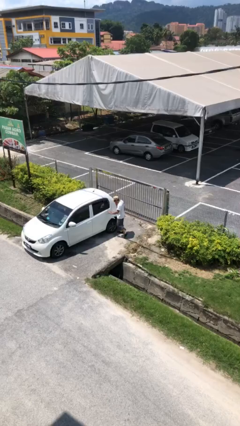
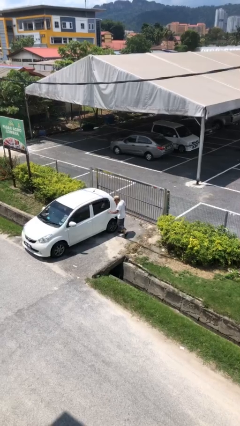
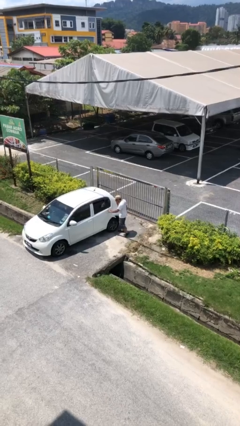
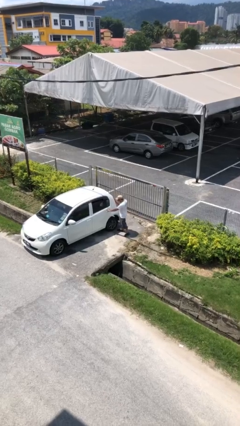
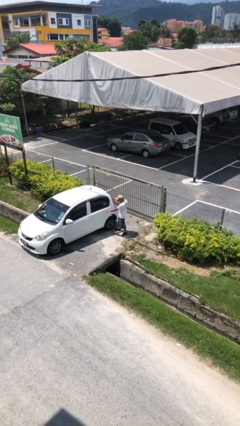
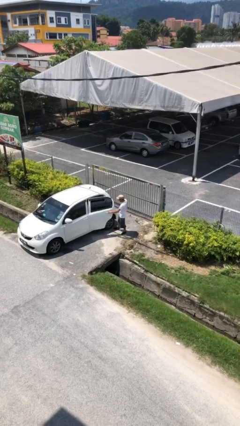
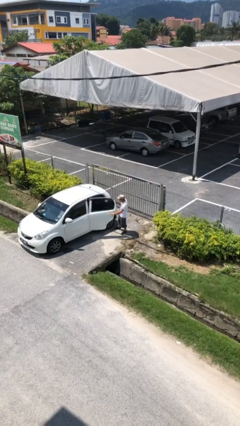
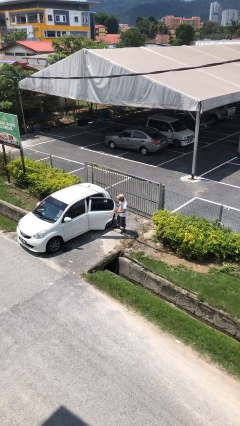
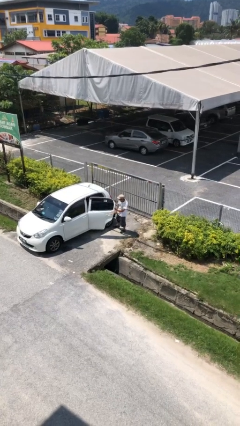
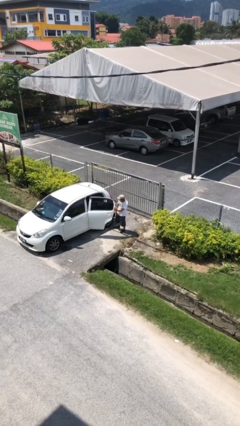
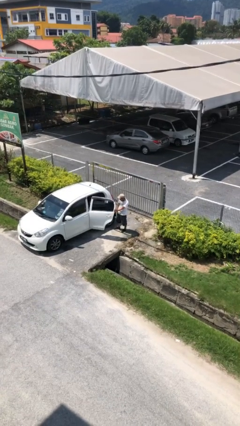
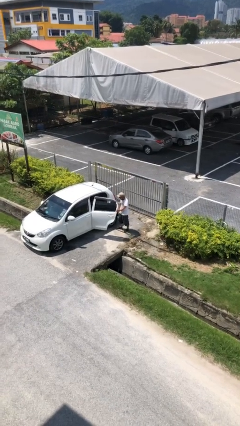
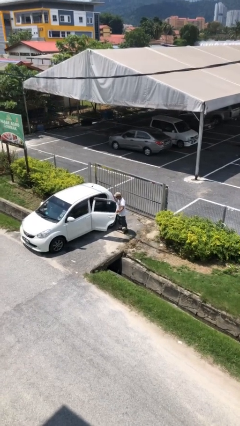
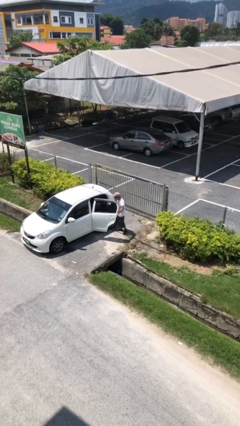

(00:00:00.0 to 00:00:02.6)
person opens car door

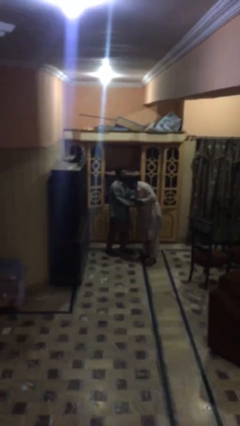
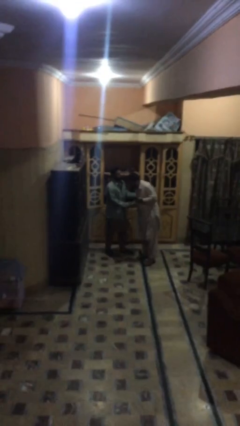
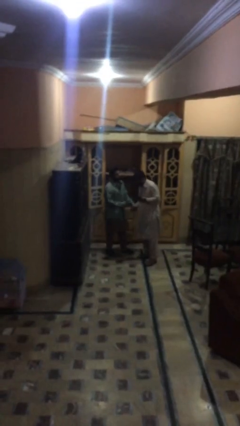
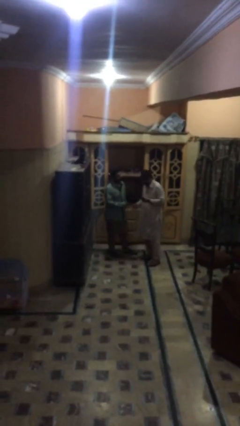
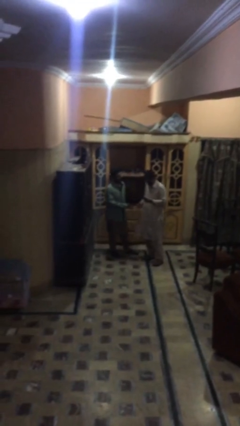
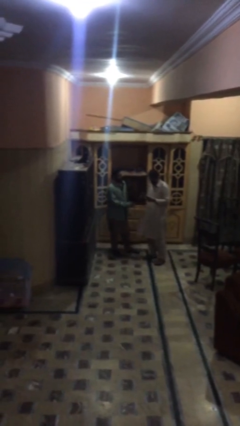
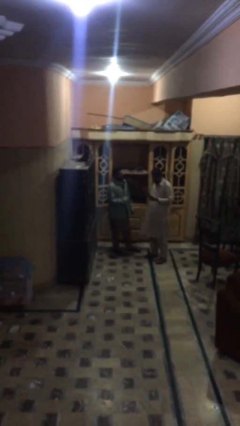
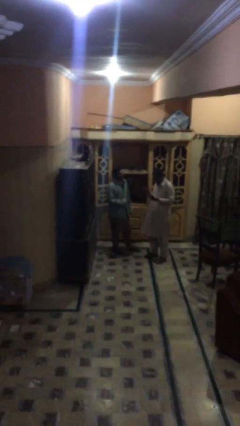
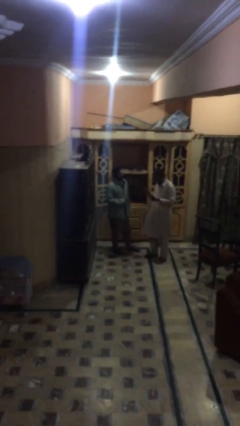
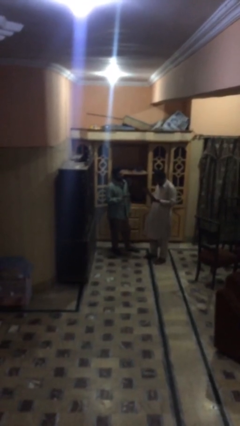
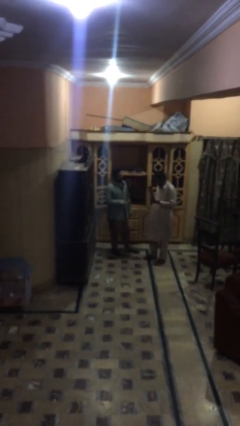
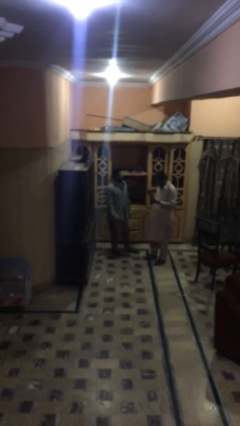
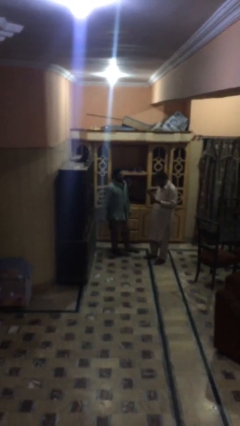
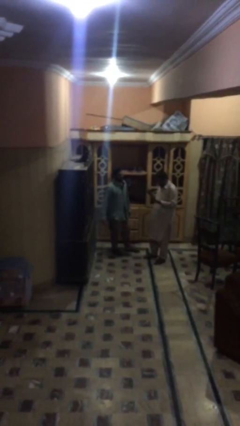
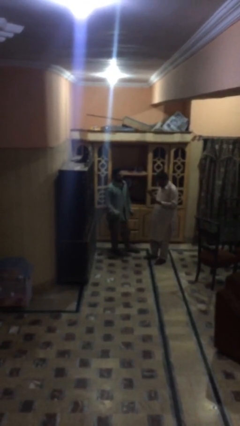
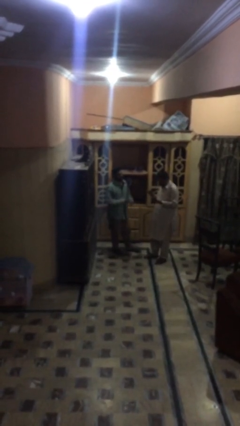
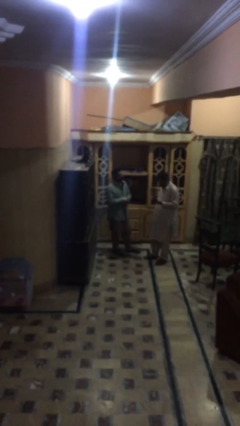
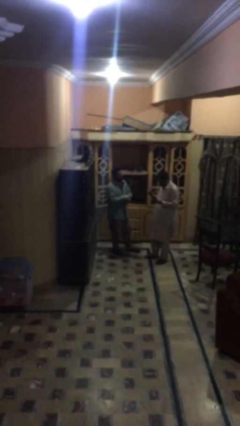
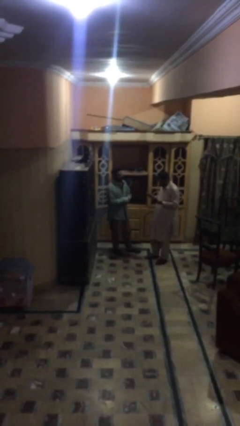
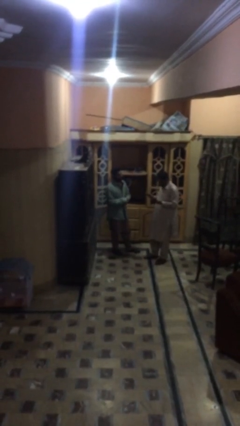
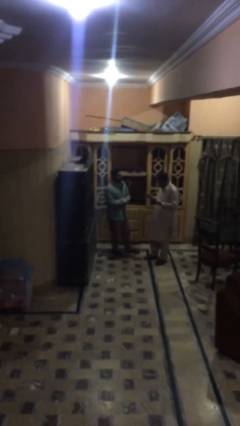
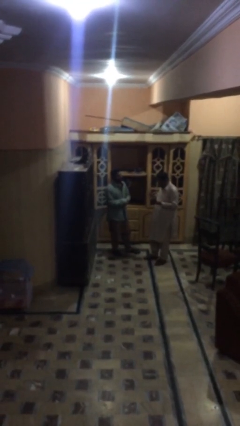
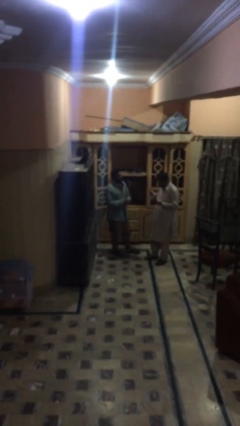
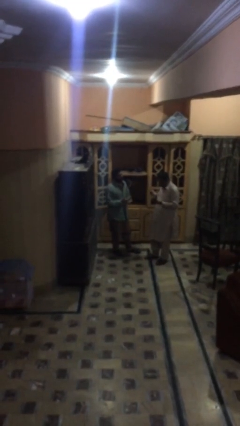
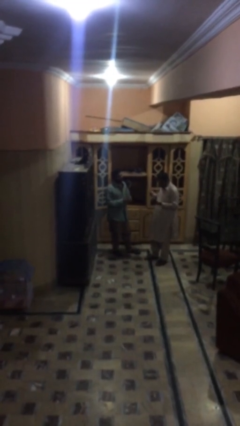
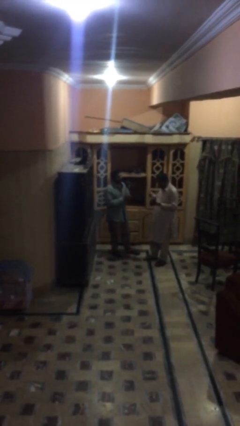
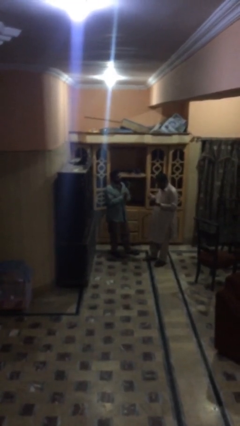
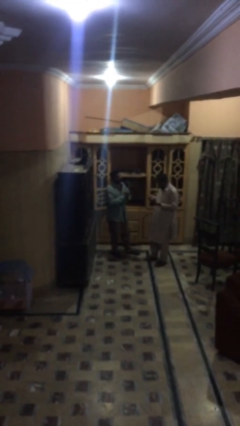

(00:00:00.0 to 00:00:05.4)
person talks to person

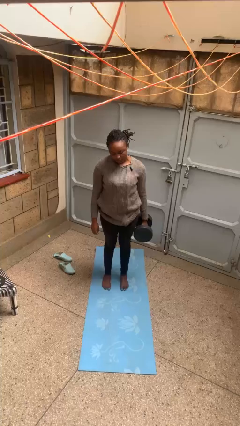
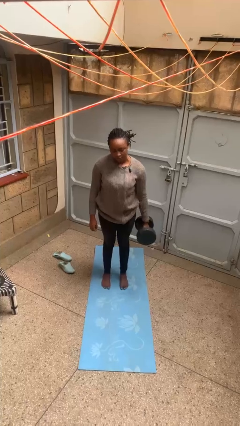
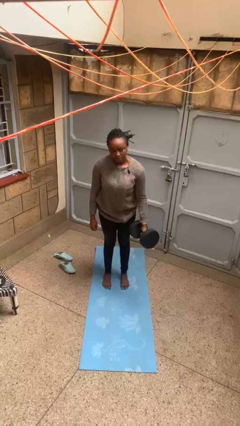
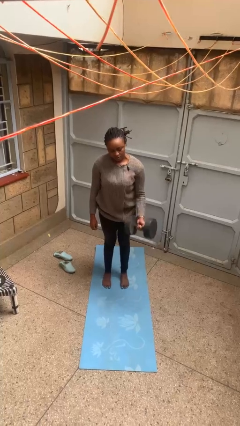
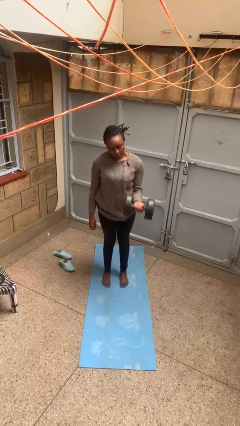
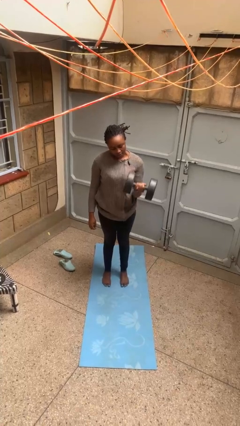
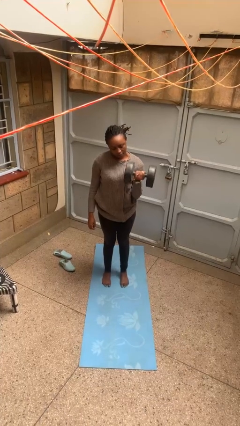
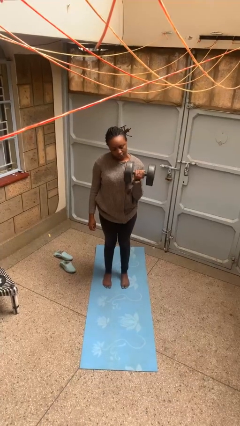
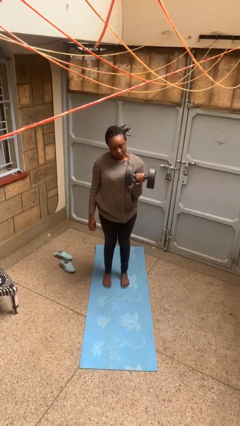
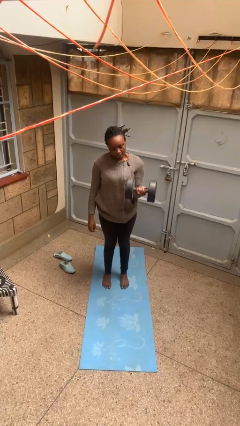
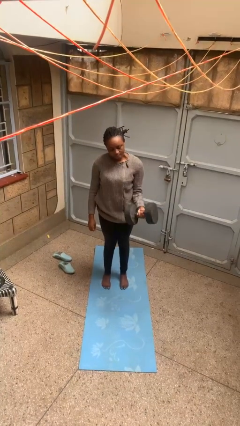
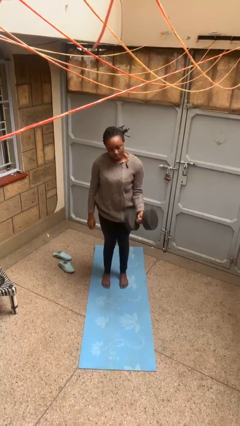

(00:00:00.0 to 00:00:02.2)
person lifts dumbbells

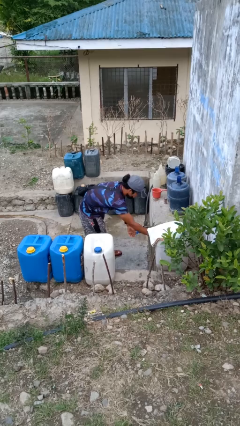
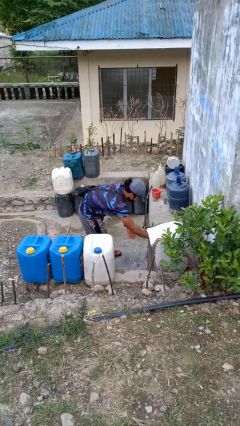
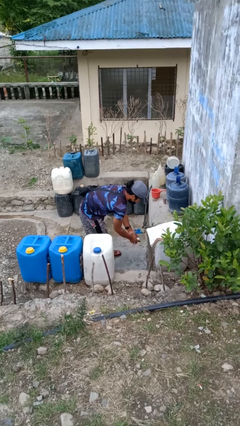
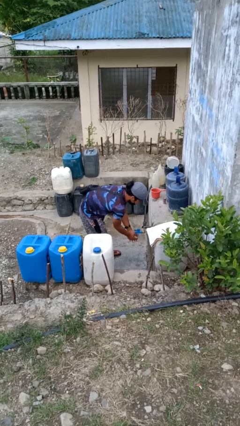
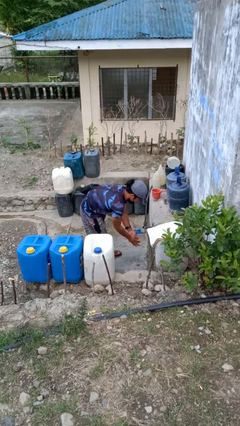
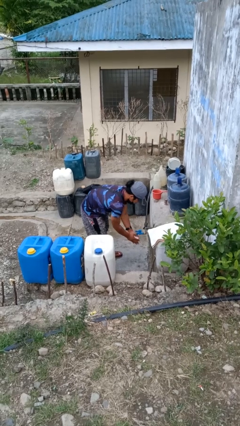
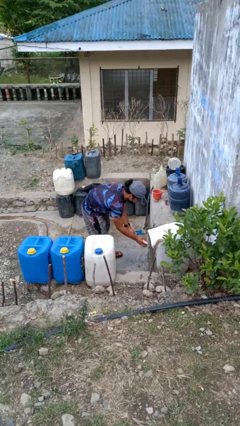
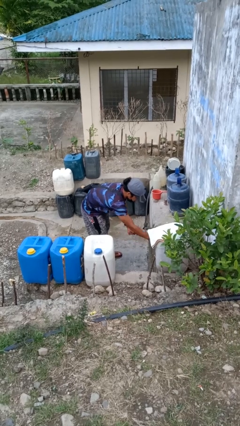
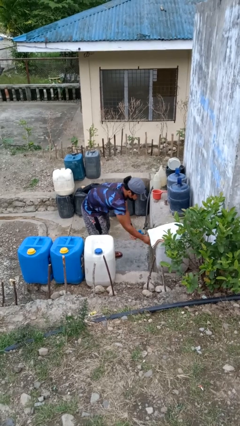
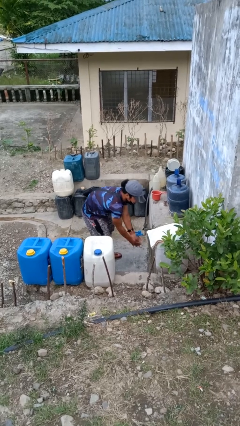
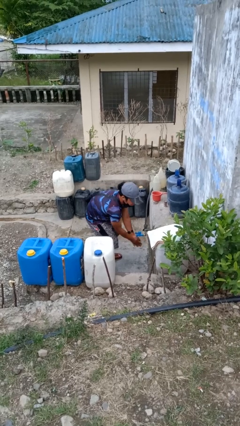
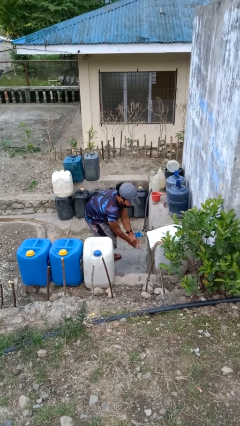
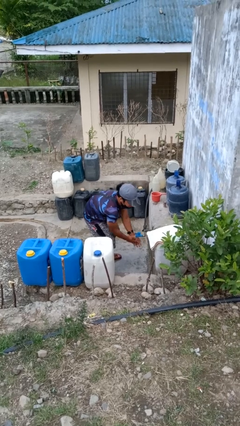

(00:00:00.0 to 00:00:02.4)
person washes hands

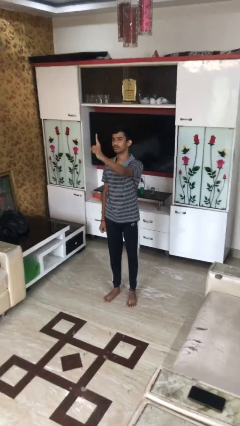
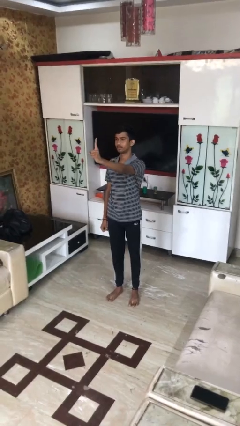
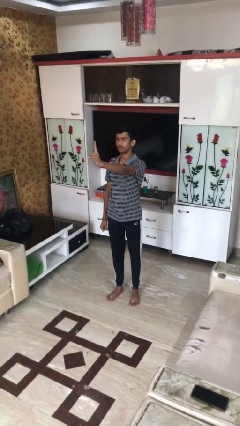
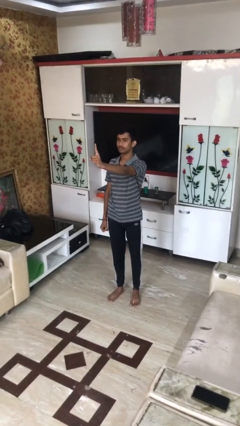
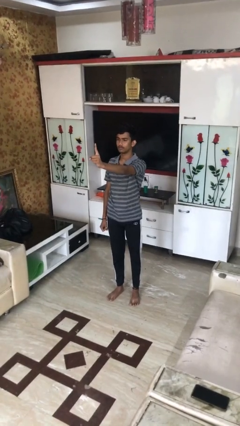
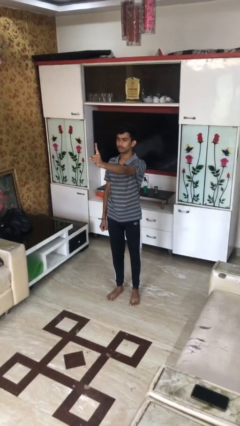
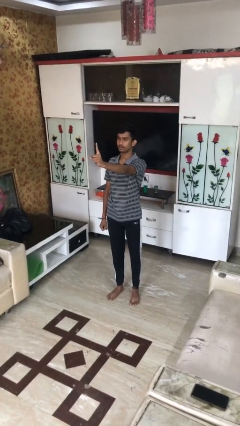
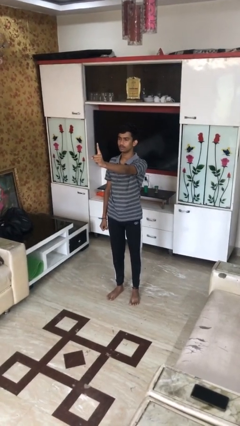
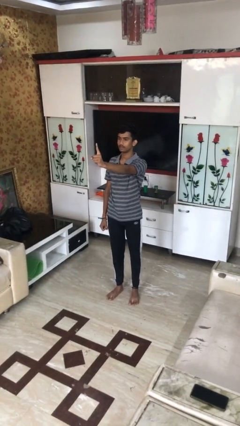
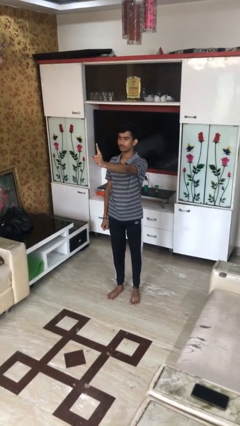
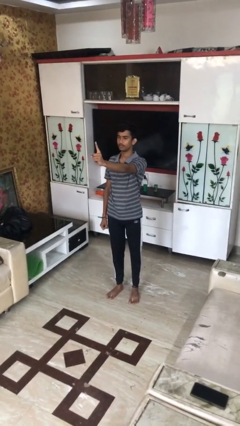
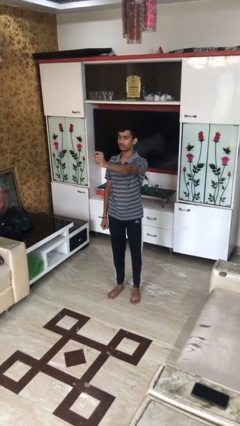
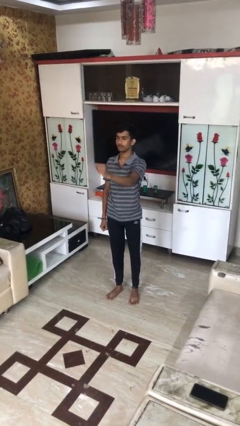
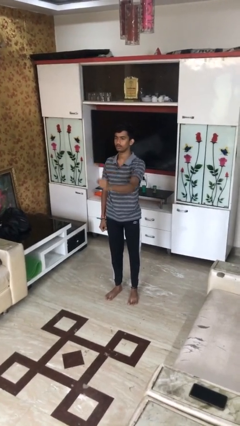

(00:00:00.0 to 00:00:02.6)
person gestures number one

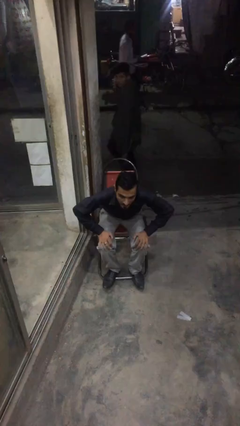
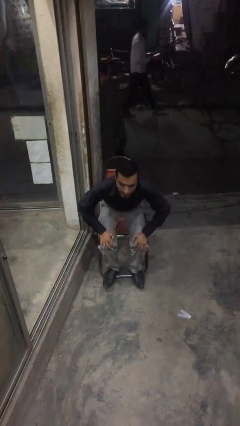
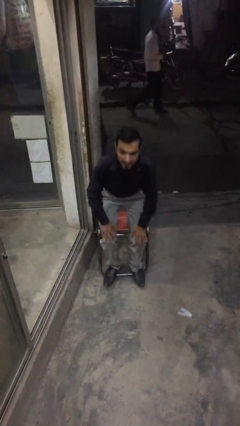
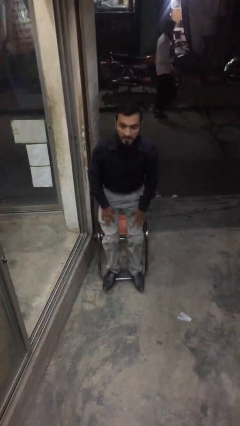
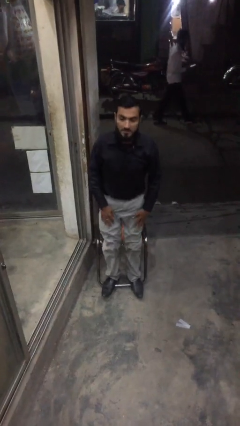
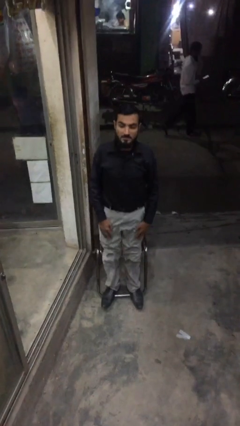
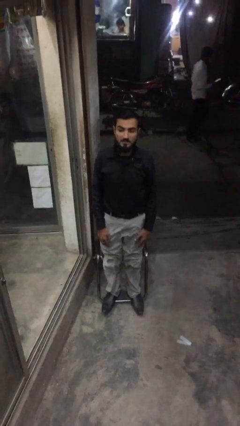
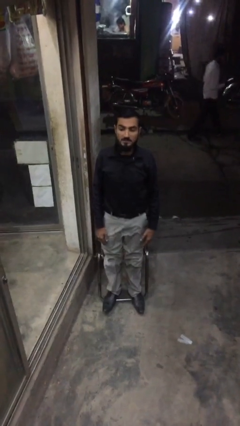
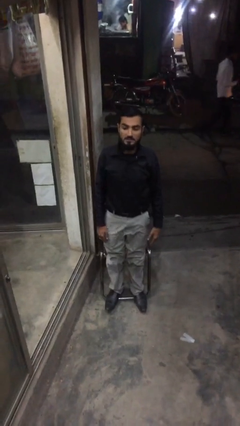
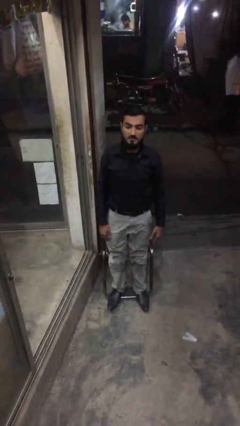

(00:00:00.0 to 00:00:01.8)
person stands up
